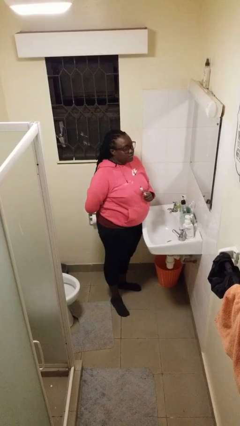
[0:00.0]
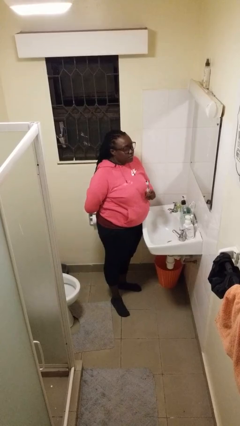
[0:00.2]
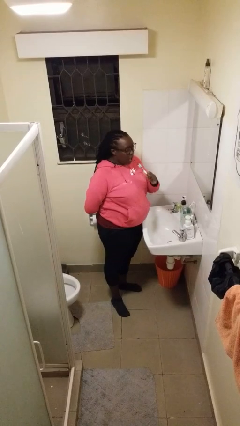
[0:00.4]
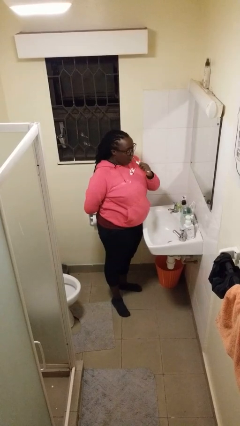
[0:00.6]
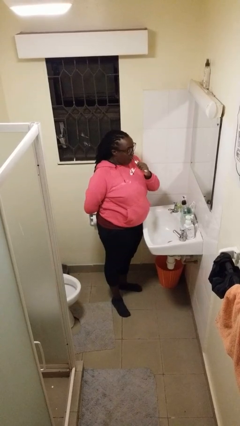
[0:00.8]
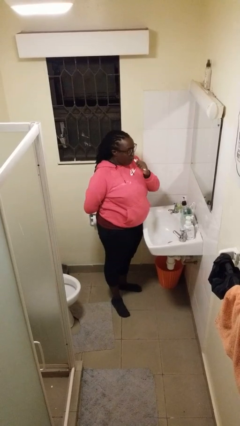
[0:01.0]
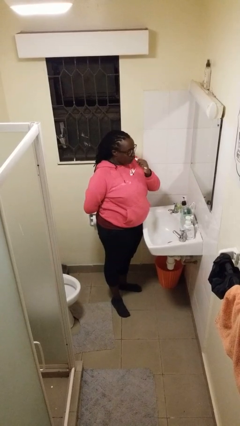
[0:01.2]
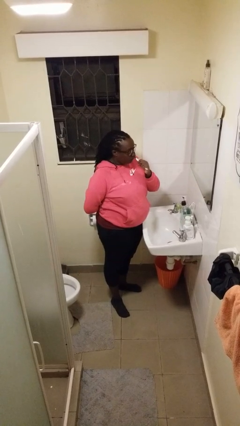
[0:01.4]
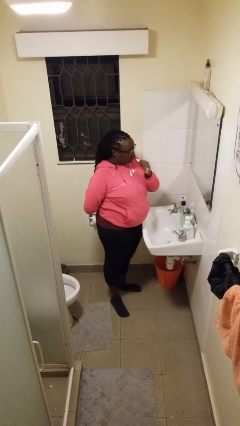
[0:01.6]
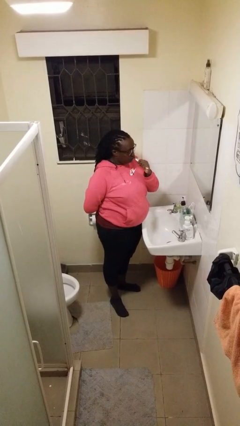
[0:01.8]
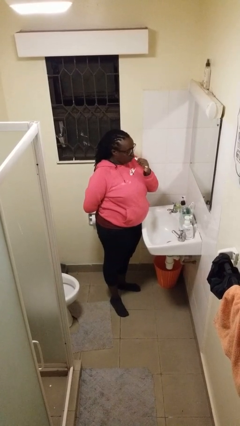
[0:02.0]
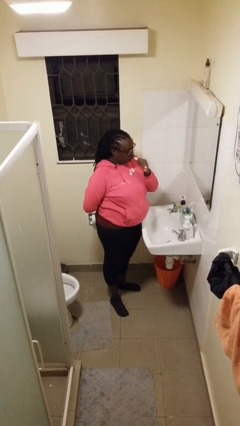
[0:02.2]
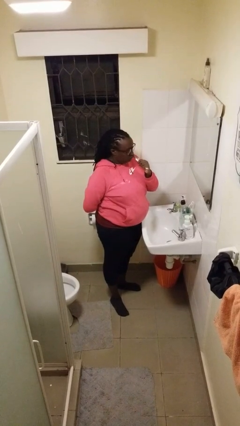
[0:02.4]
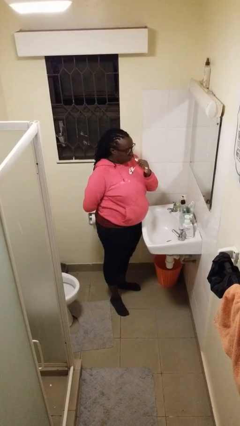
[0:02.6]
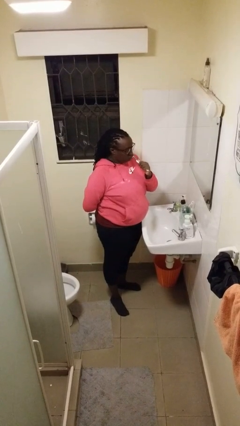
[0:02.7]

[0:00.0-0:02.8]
person brushes teeth

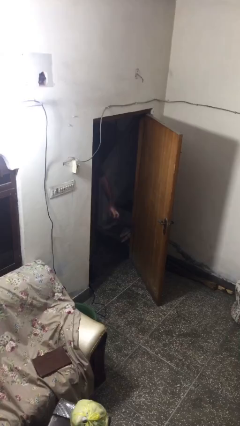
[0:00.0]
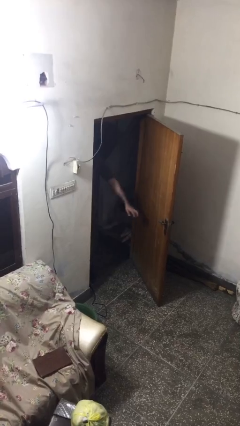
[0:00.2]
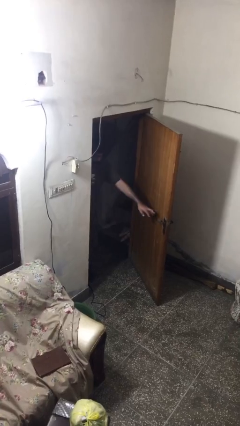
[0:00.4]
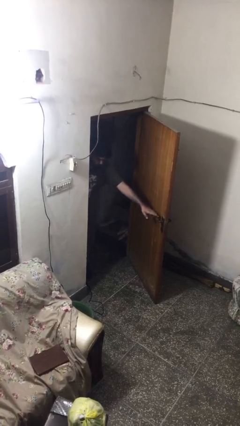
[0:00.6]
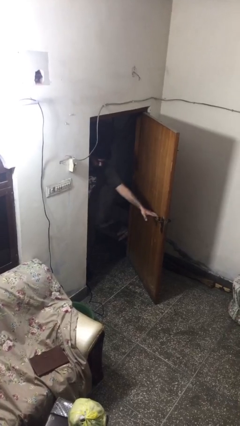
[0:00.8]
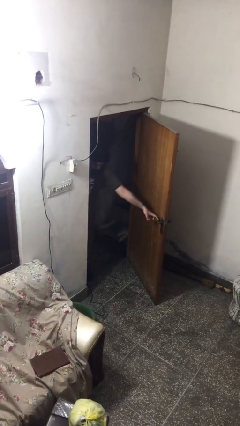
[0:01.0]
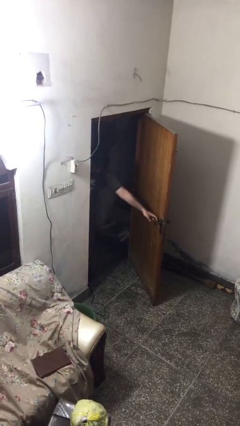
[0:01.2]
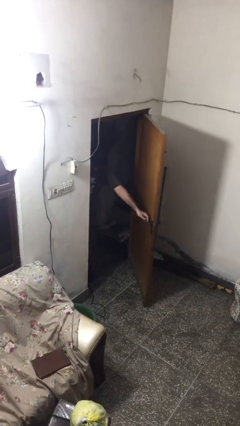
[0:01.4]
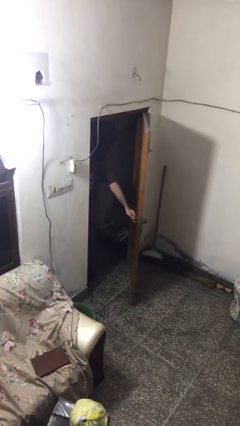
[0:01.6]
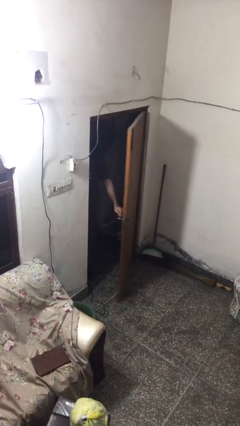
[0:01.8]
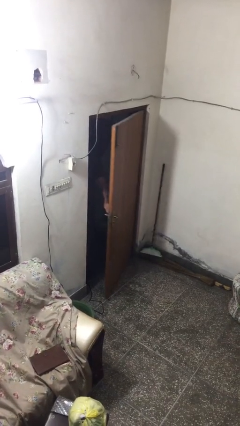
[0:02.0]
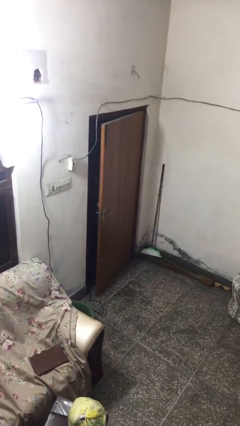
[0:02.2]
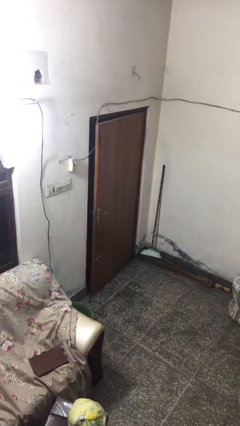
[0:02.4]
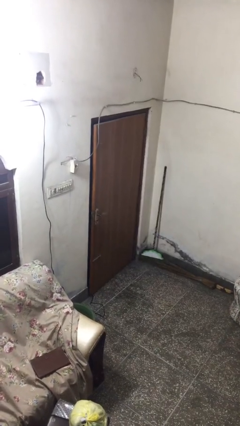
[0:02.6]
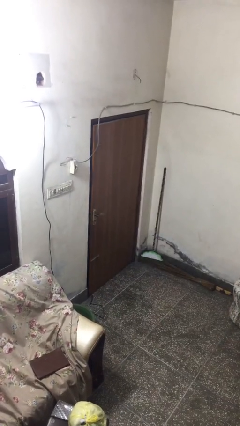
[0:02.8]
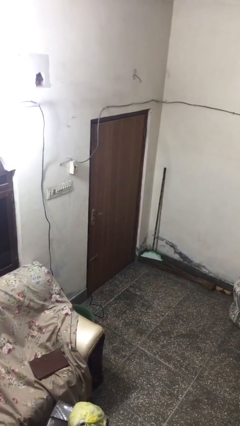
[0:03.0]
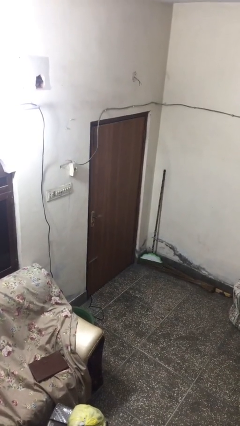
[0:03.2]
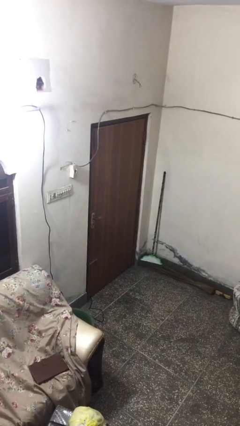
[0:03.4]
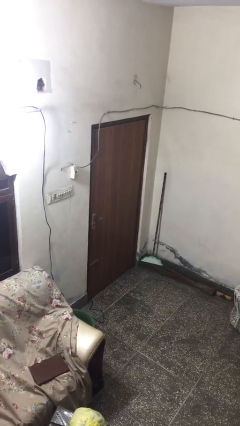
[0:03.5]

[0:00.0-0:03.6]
person closes facility door

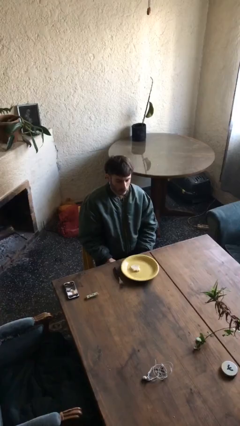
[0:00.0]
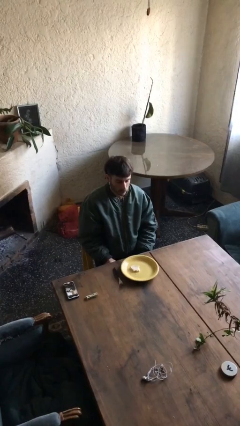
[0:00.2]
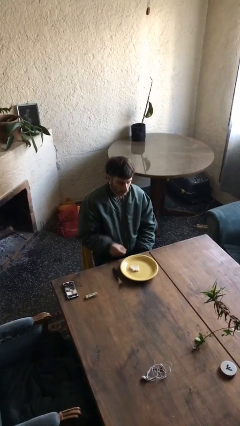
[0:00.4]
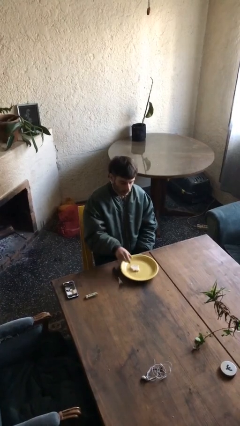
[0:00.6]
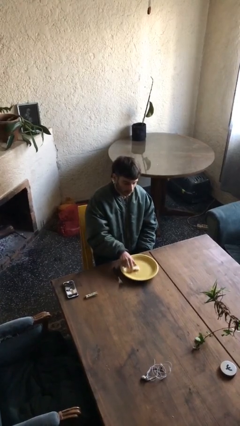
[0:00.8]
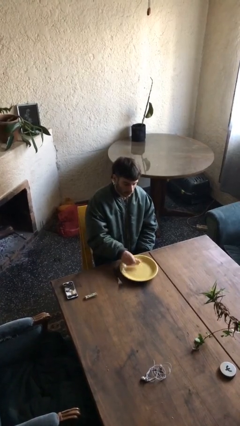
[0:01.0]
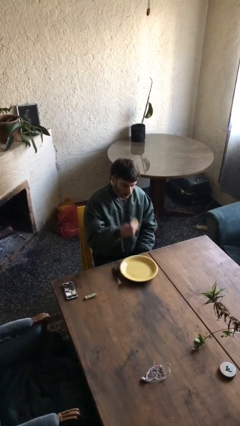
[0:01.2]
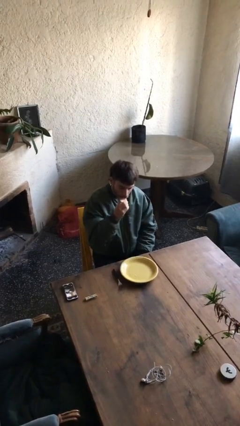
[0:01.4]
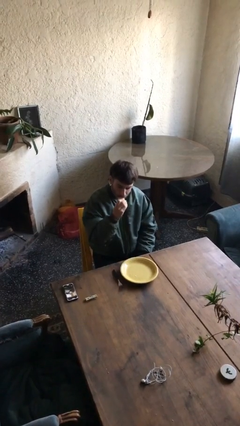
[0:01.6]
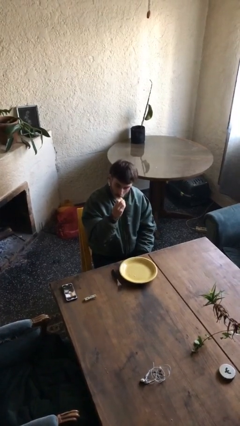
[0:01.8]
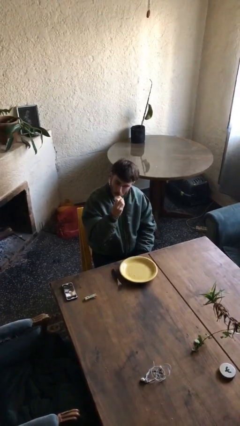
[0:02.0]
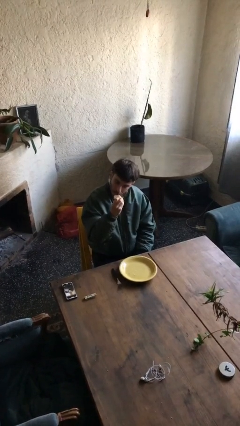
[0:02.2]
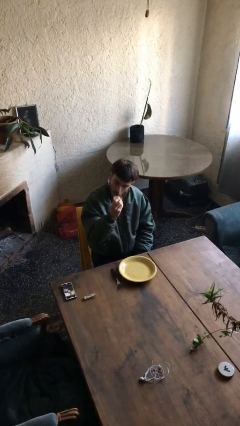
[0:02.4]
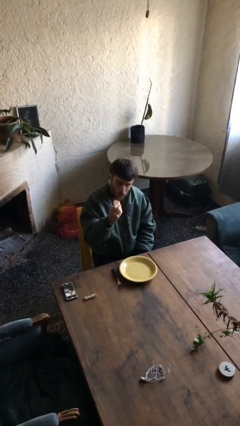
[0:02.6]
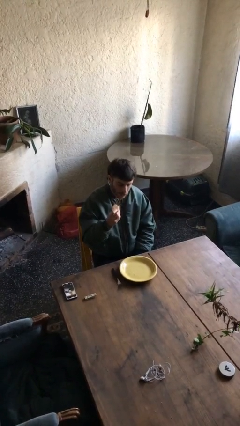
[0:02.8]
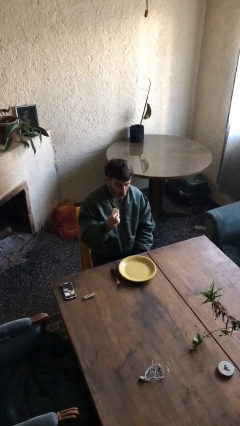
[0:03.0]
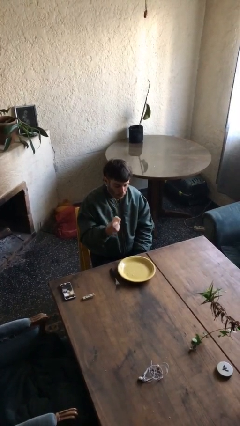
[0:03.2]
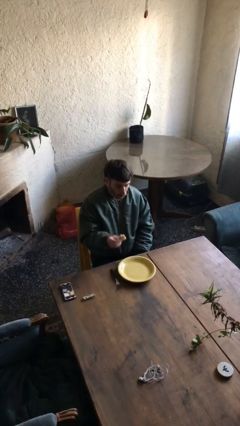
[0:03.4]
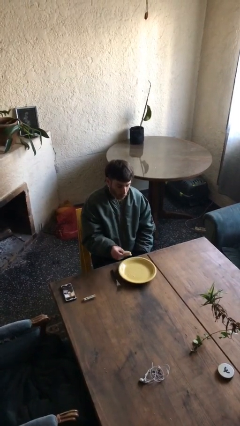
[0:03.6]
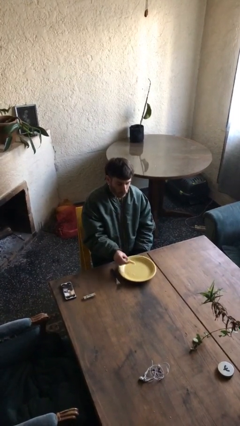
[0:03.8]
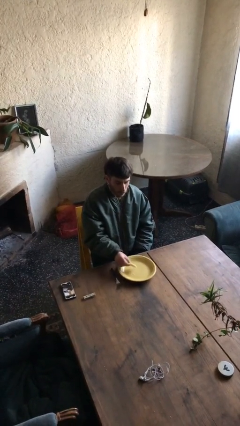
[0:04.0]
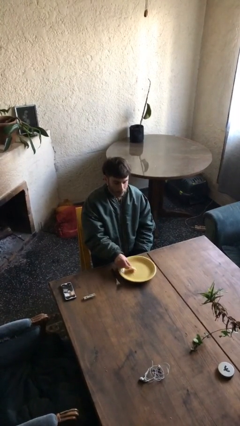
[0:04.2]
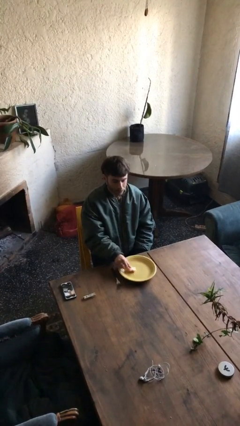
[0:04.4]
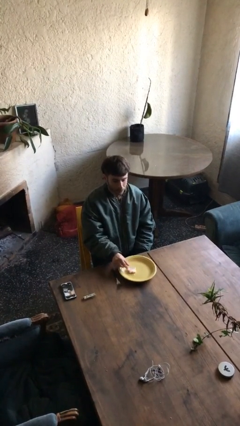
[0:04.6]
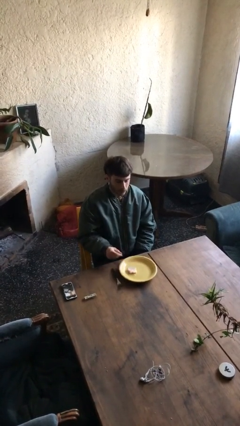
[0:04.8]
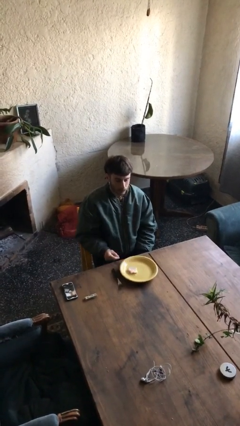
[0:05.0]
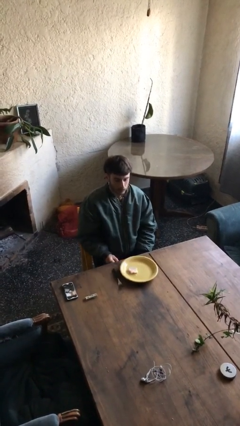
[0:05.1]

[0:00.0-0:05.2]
person eats with hands

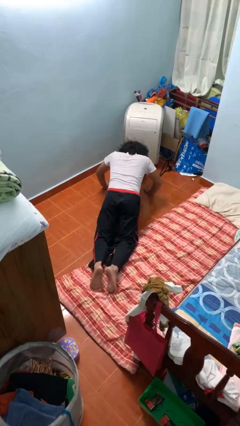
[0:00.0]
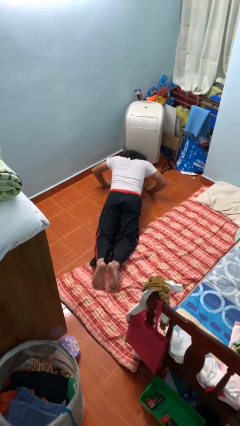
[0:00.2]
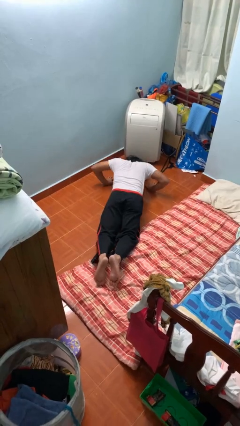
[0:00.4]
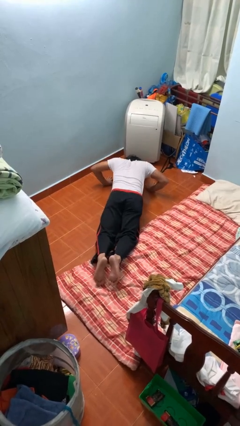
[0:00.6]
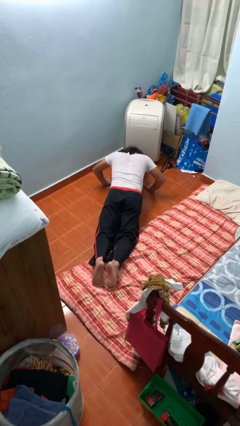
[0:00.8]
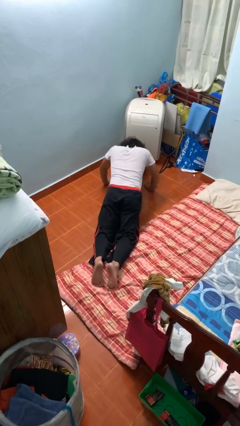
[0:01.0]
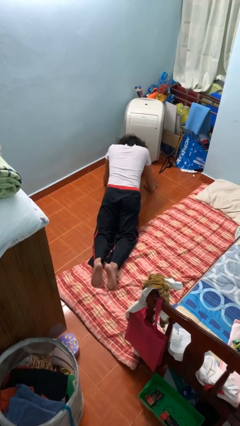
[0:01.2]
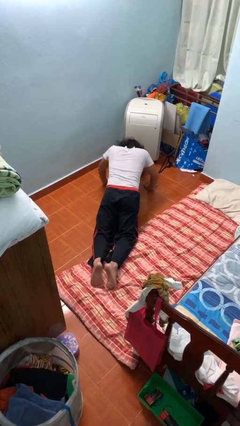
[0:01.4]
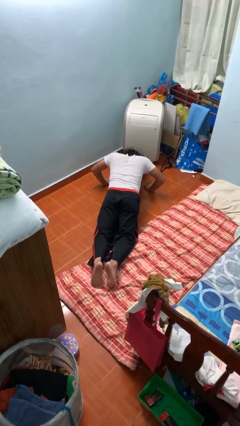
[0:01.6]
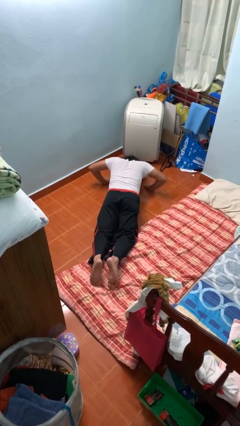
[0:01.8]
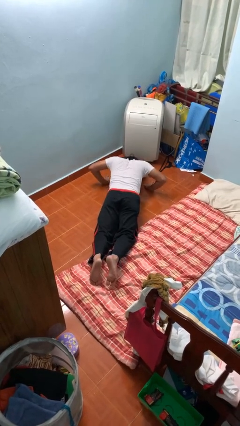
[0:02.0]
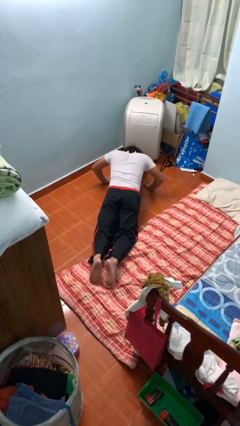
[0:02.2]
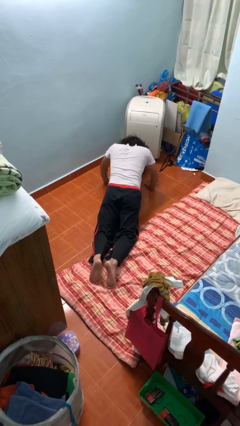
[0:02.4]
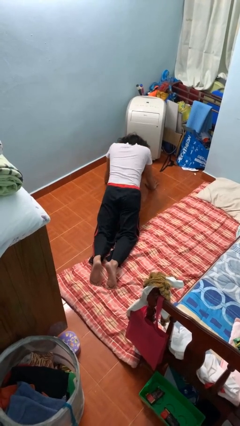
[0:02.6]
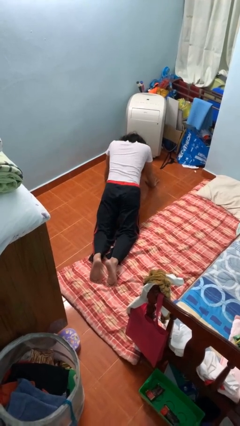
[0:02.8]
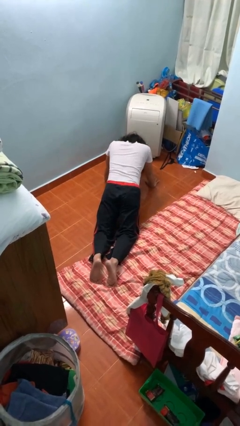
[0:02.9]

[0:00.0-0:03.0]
person exercises with pushup

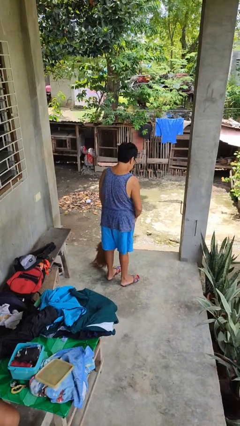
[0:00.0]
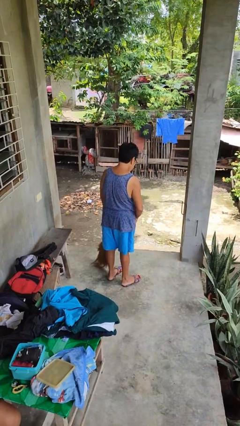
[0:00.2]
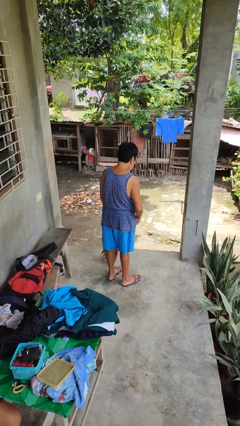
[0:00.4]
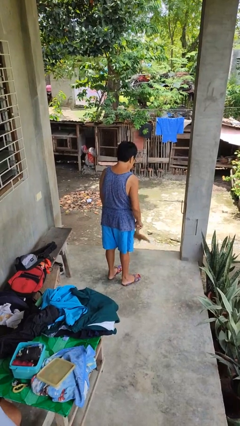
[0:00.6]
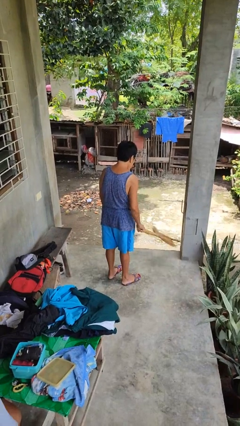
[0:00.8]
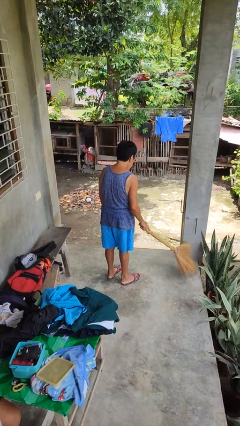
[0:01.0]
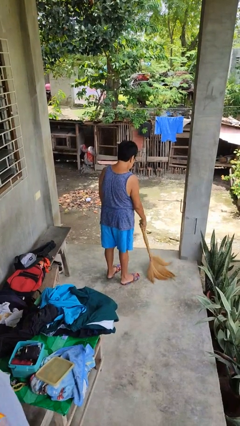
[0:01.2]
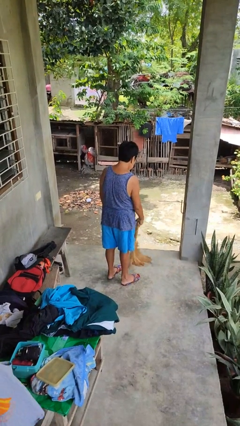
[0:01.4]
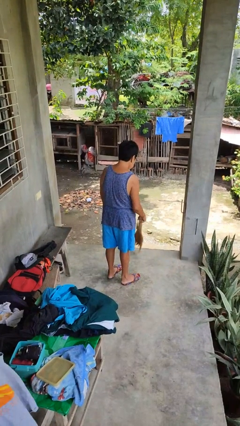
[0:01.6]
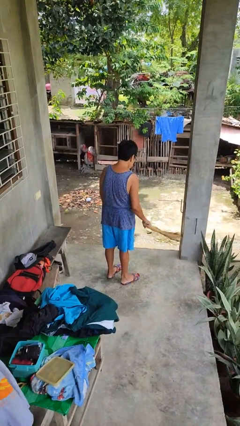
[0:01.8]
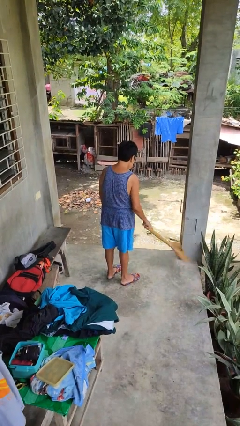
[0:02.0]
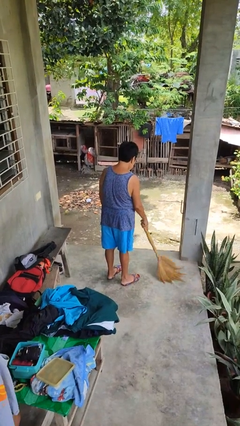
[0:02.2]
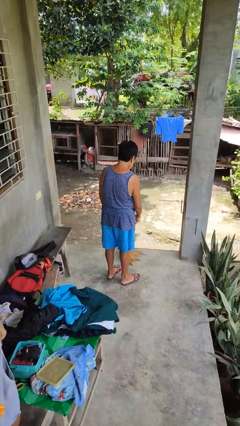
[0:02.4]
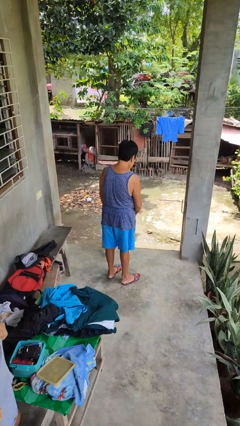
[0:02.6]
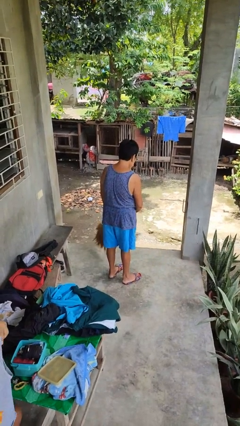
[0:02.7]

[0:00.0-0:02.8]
person sweeps floor

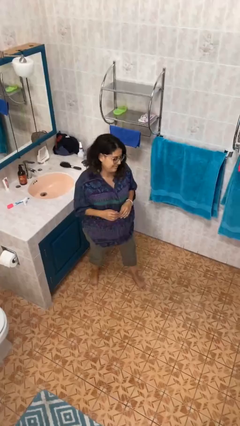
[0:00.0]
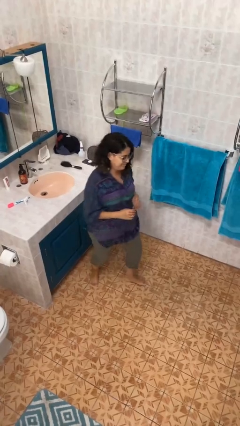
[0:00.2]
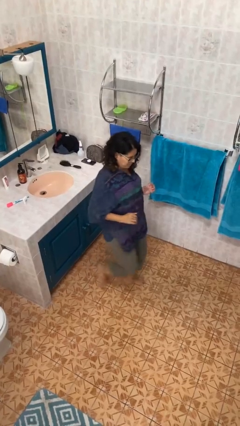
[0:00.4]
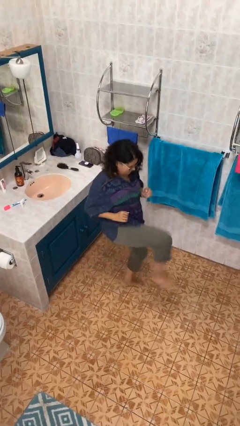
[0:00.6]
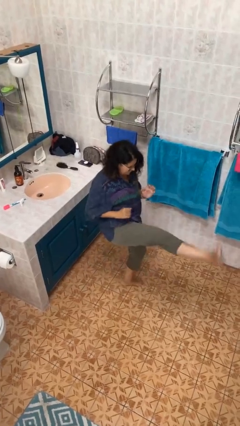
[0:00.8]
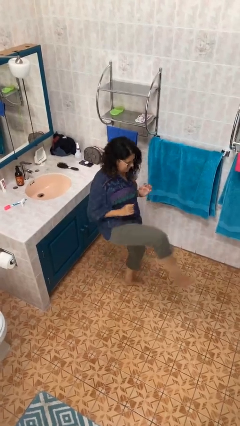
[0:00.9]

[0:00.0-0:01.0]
person karate kicks
